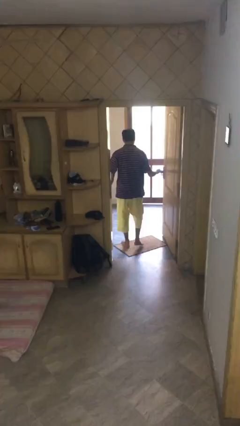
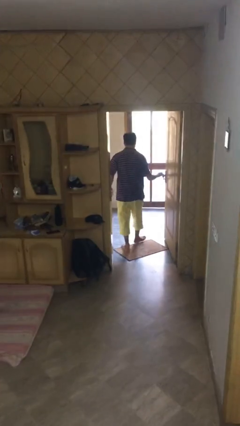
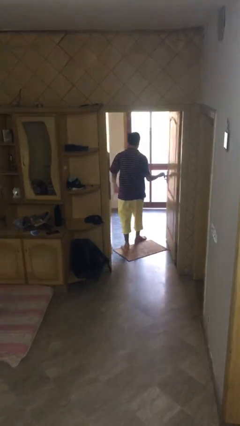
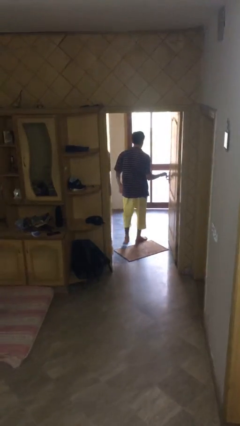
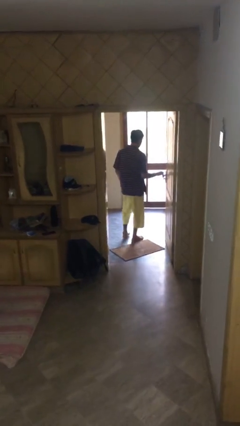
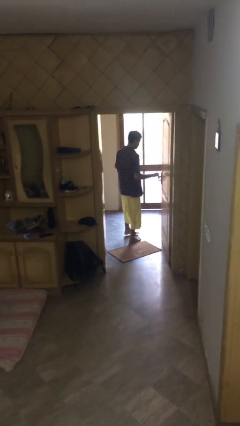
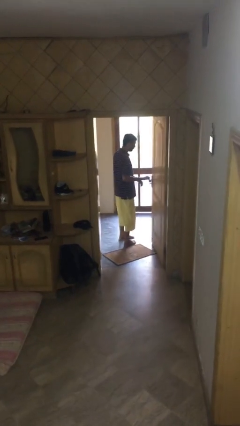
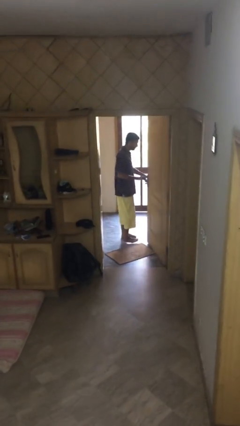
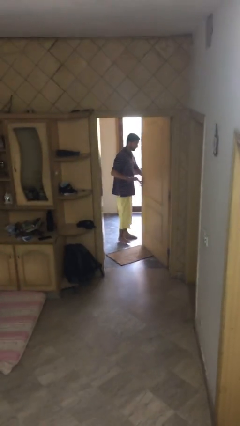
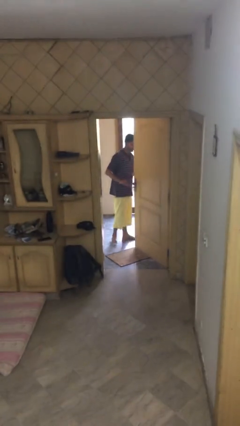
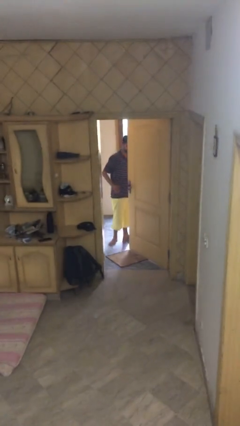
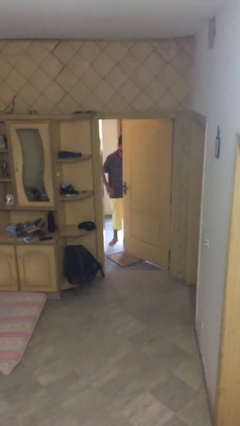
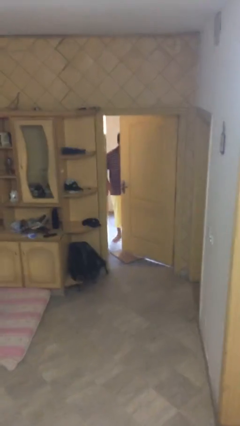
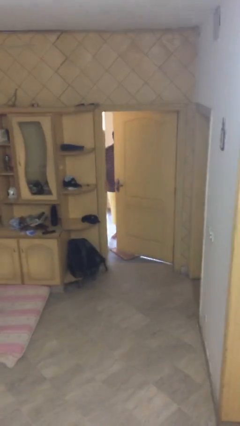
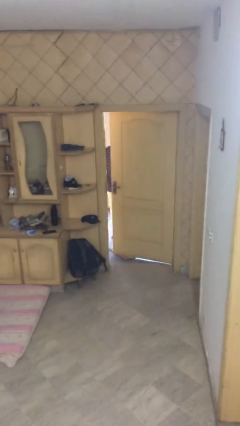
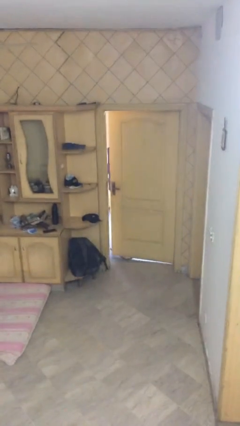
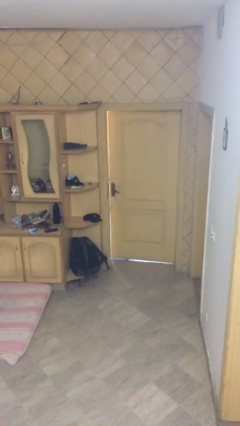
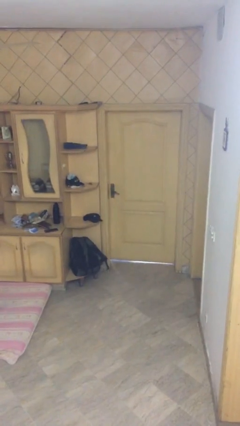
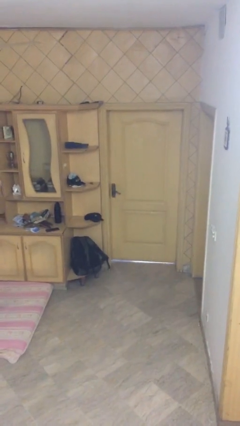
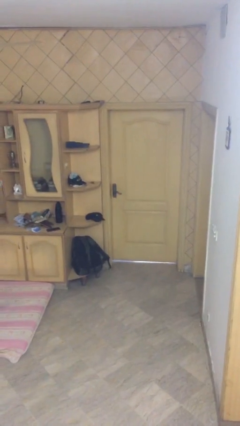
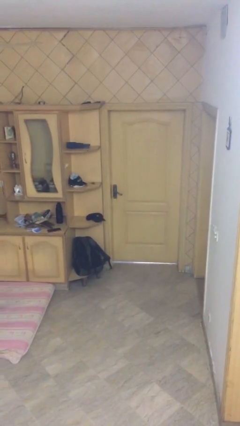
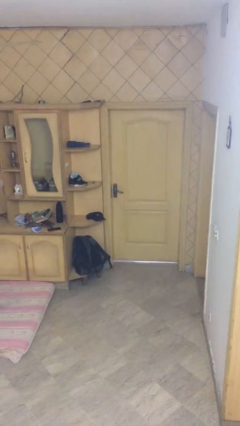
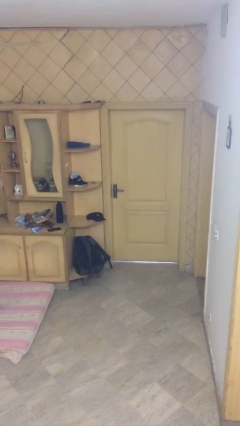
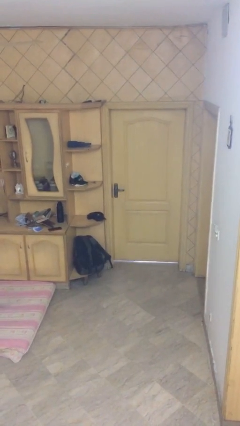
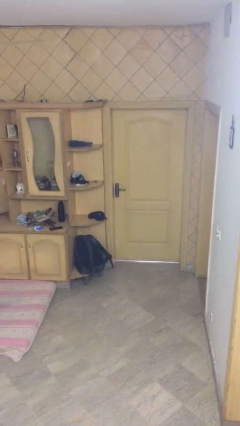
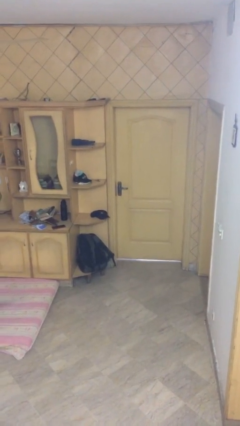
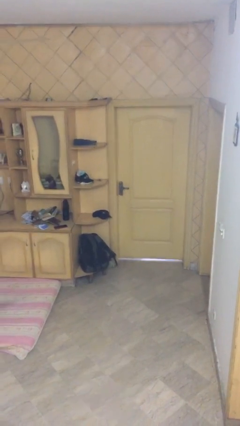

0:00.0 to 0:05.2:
person closes facility door

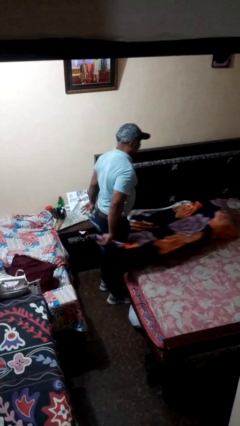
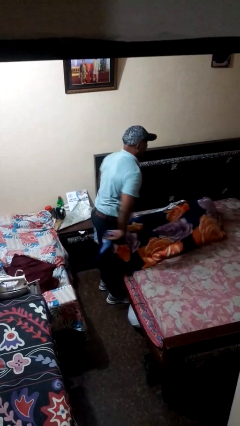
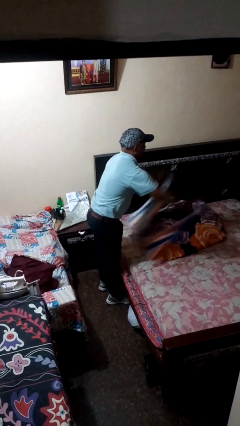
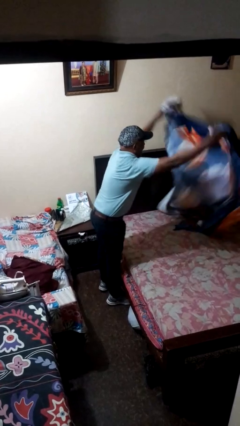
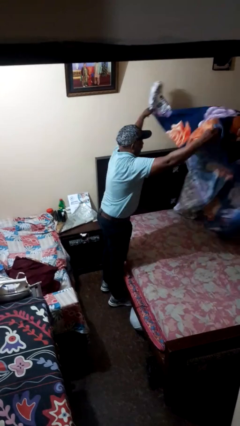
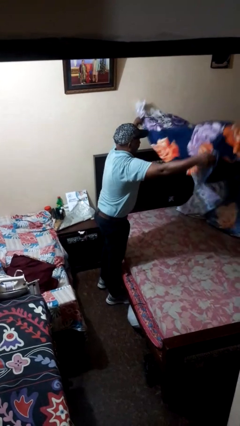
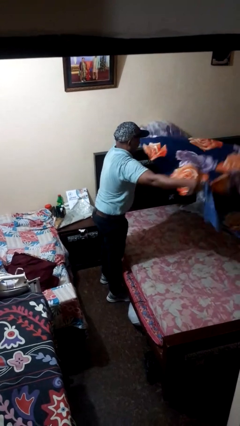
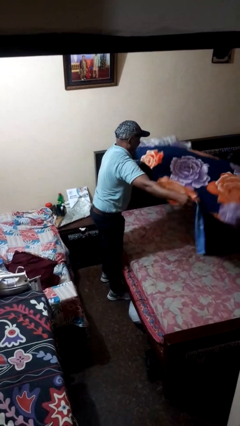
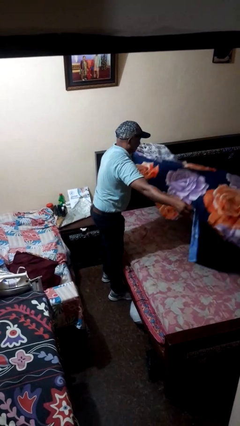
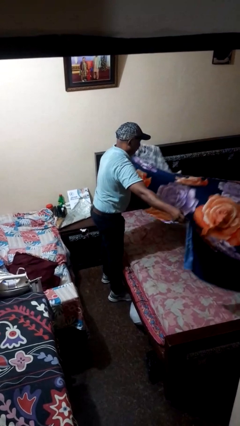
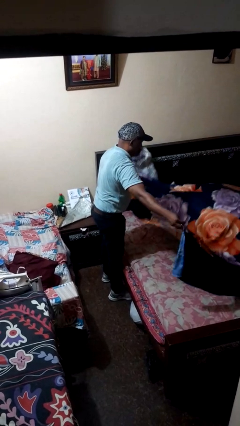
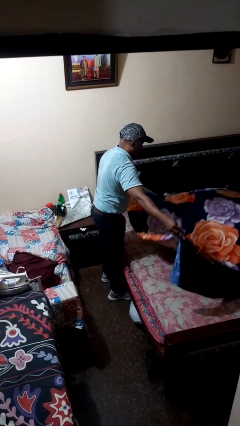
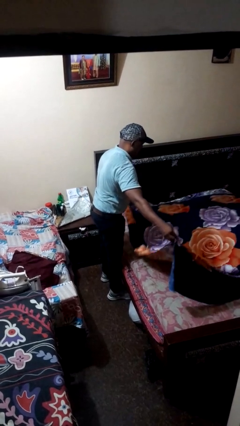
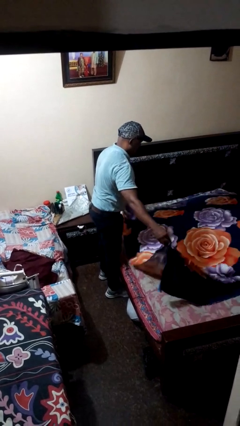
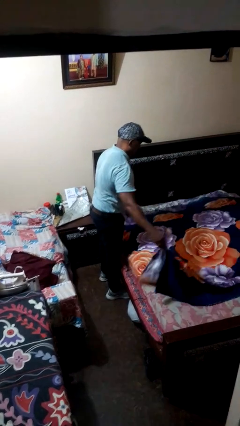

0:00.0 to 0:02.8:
person makes bed

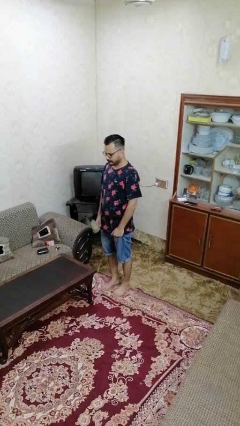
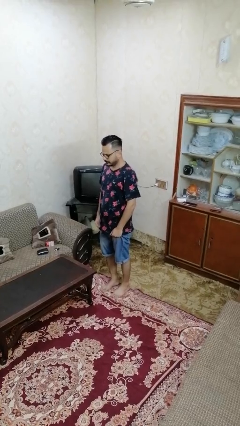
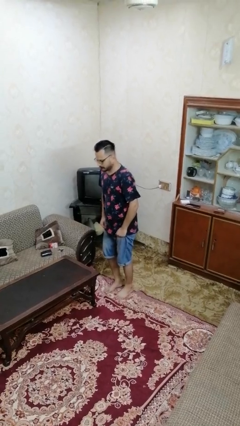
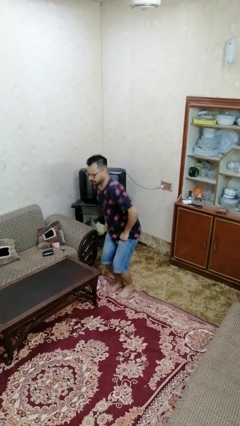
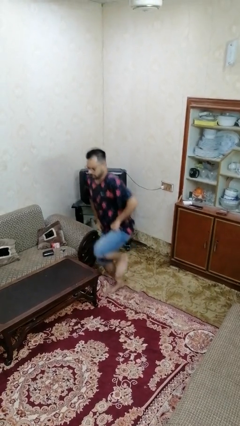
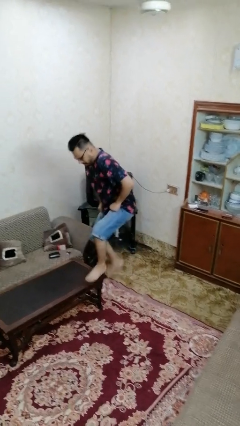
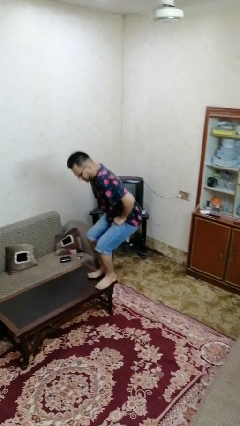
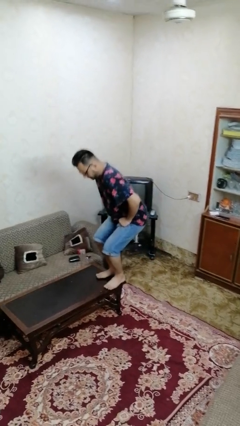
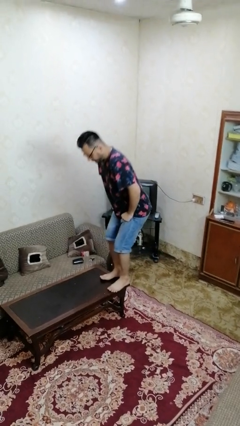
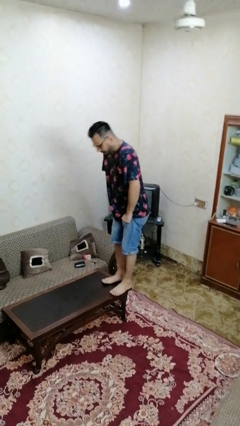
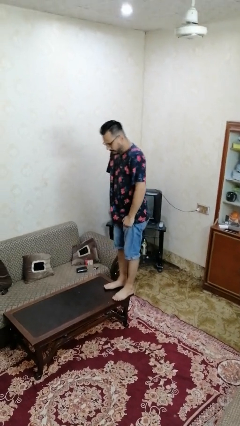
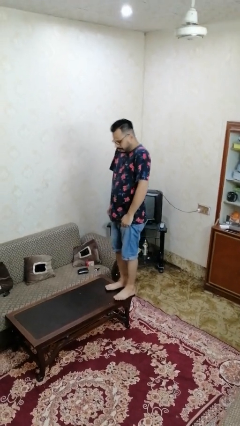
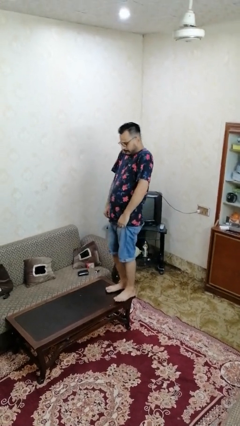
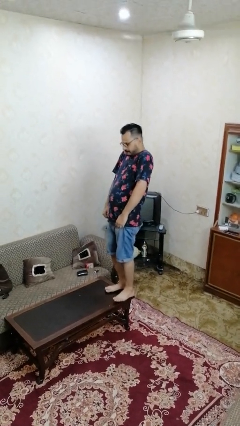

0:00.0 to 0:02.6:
person climbs on table

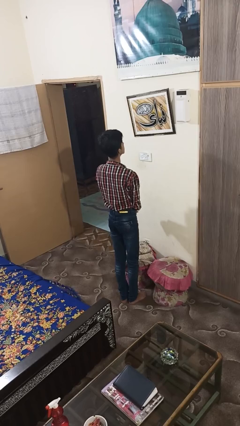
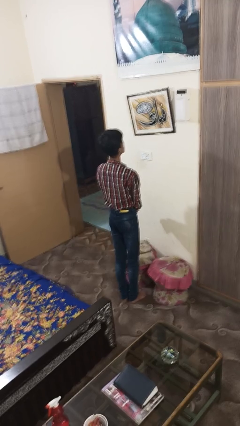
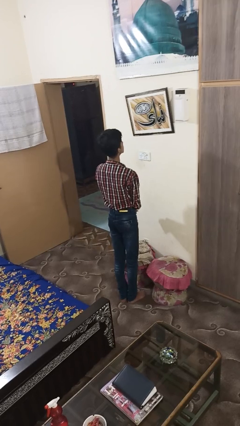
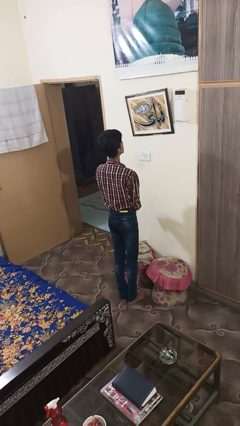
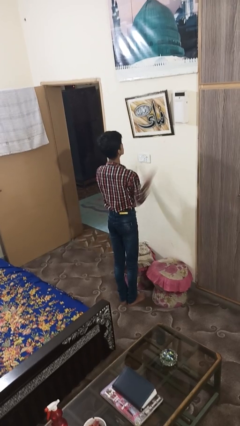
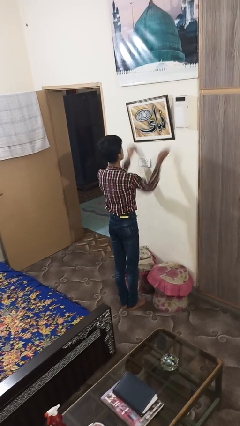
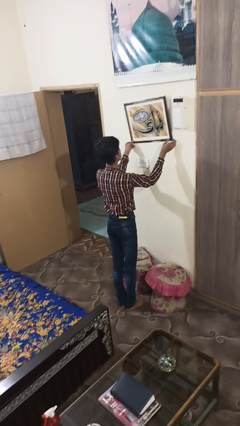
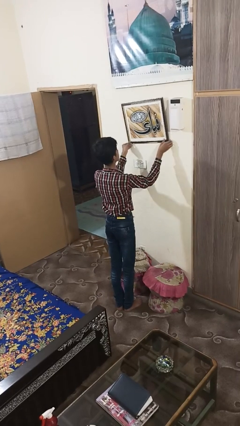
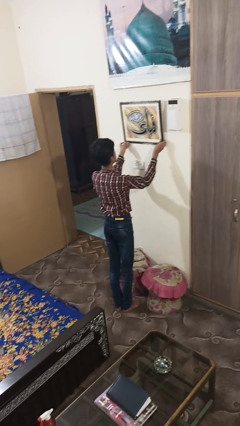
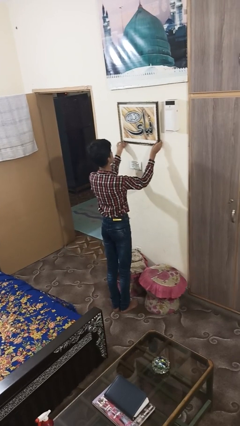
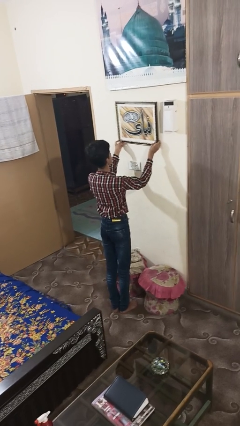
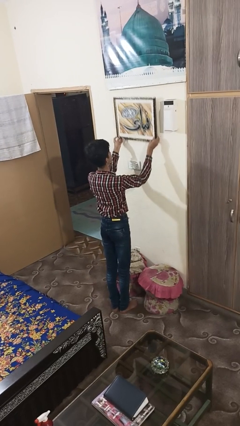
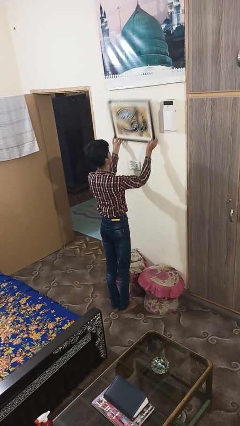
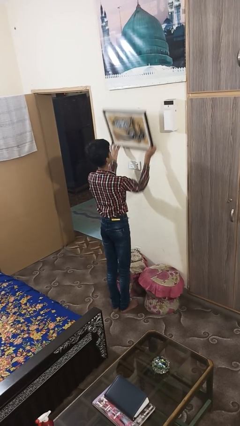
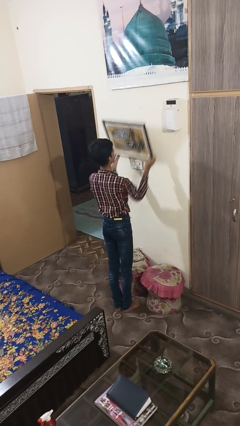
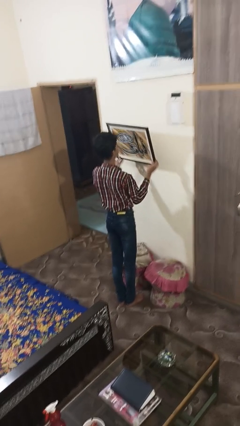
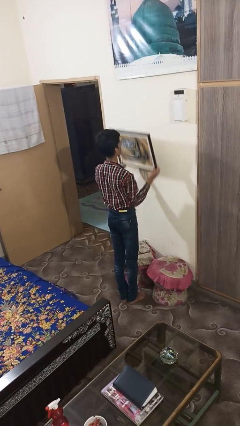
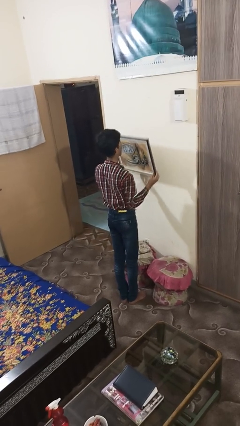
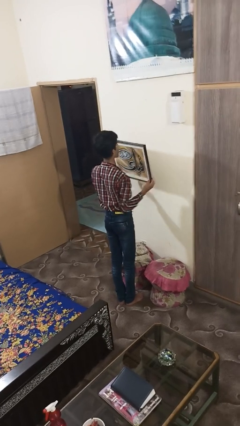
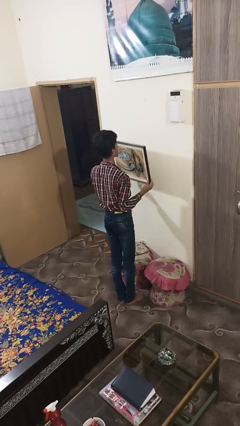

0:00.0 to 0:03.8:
person takes down picture frame

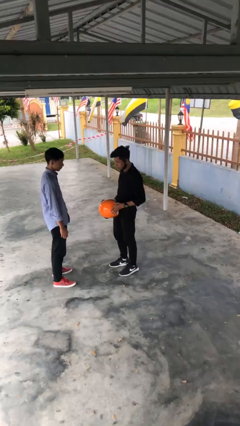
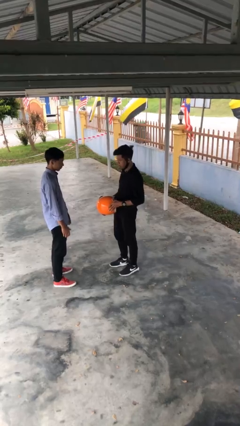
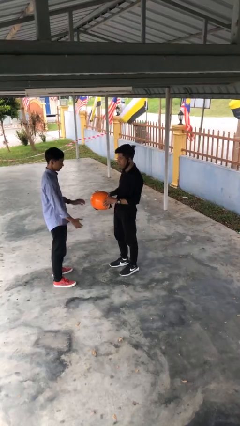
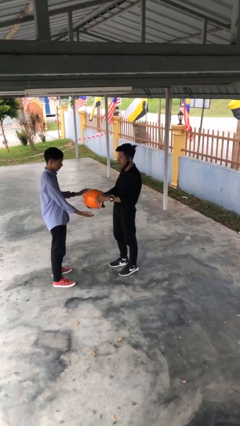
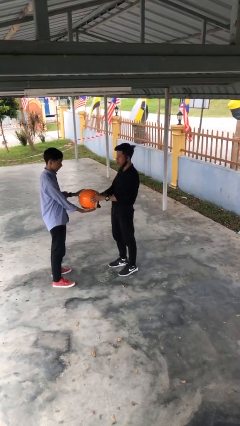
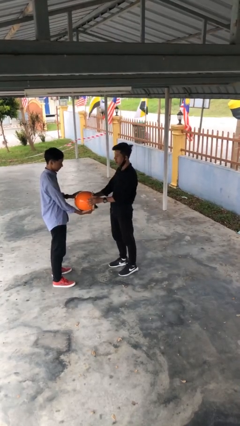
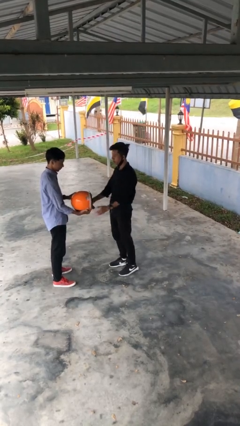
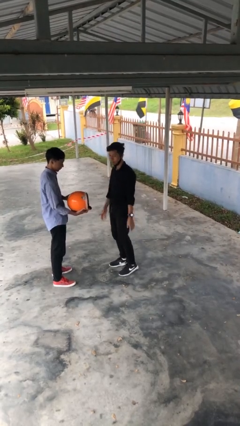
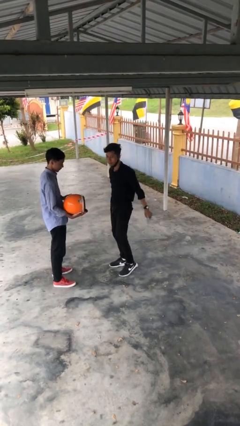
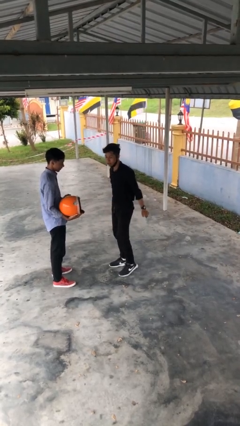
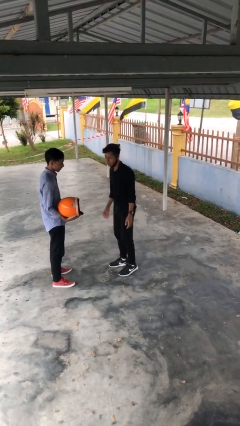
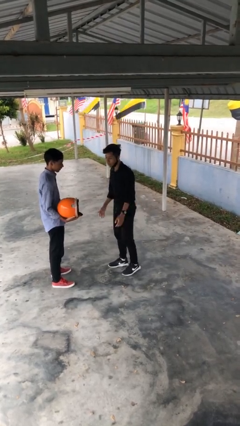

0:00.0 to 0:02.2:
person transfers object to person

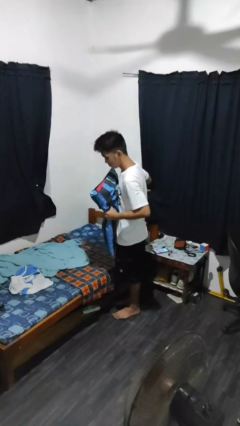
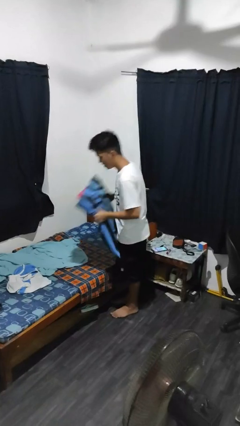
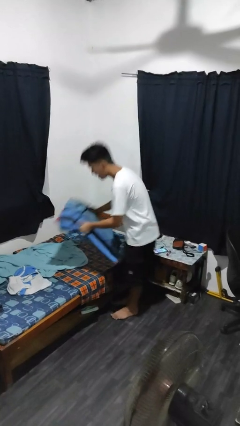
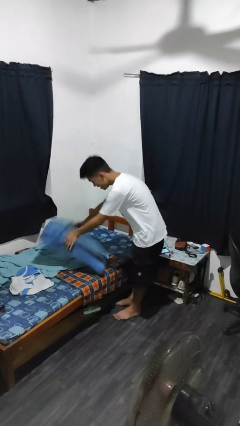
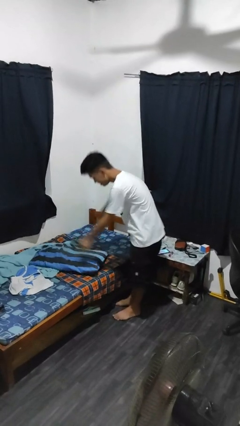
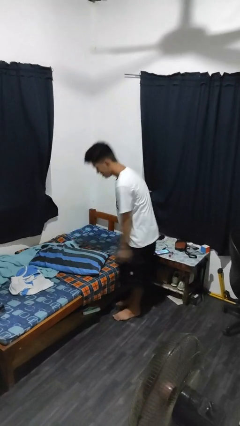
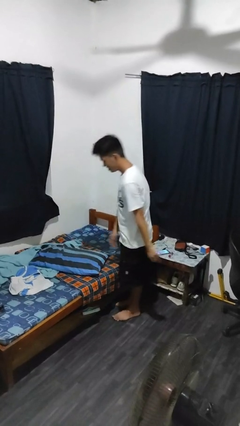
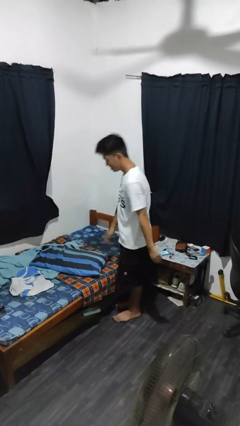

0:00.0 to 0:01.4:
person puts down object on bed
